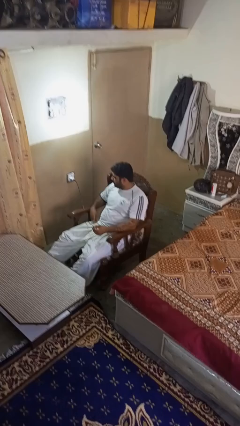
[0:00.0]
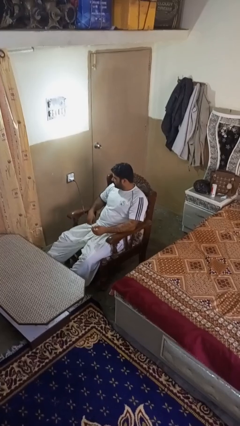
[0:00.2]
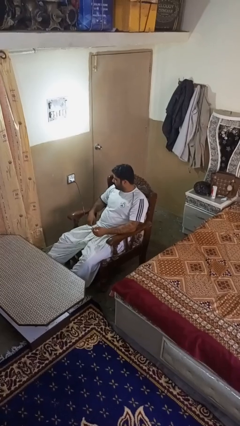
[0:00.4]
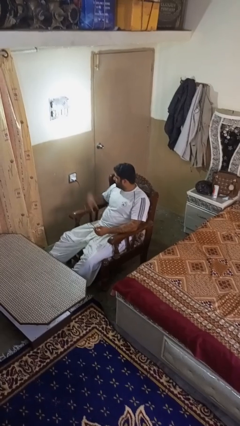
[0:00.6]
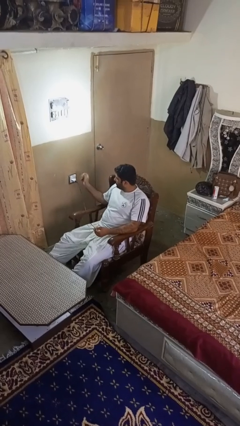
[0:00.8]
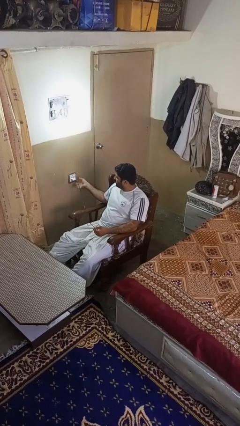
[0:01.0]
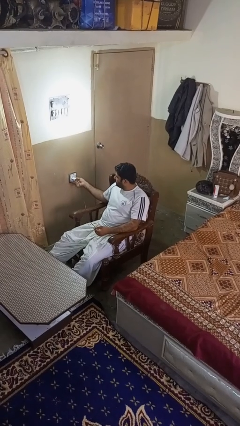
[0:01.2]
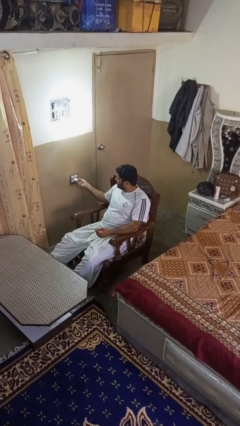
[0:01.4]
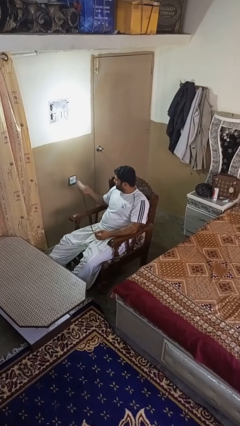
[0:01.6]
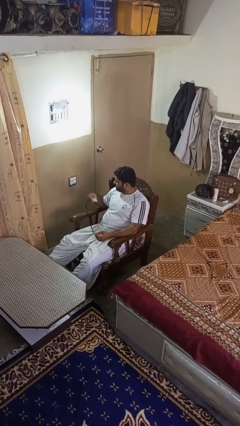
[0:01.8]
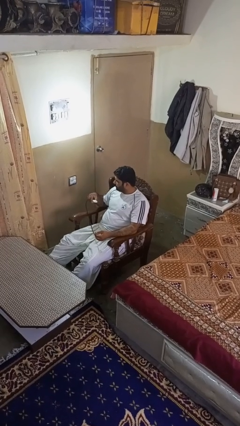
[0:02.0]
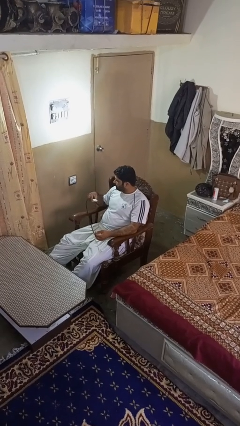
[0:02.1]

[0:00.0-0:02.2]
person unplugs from electrical socket

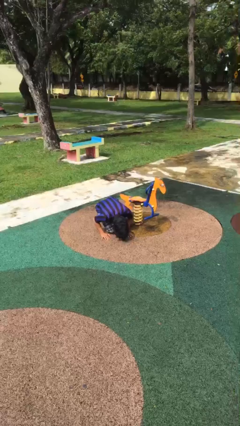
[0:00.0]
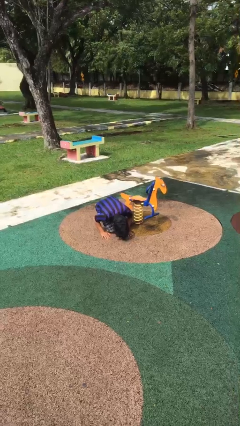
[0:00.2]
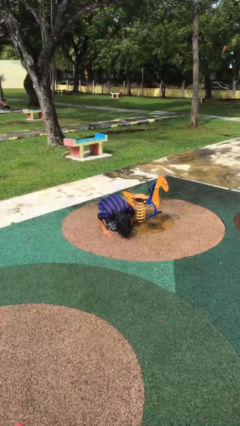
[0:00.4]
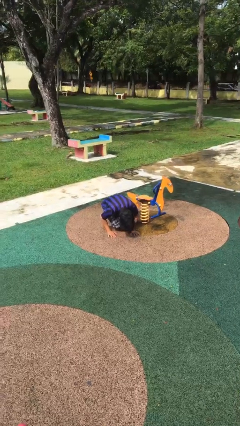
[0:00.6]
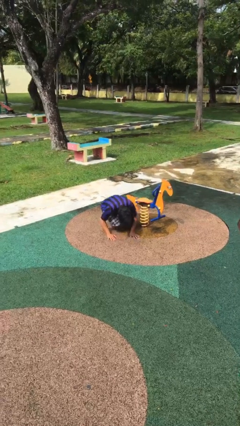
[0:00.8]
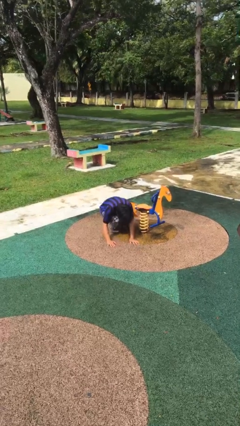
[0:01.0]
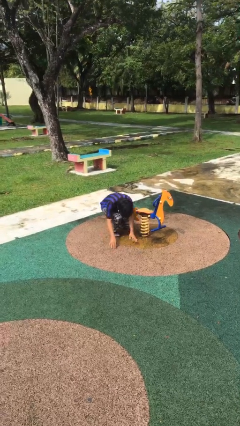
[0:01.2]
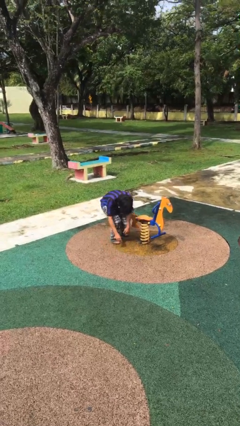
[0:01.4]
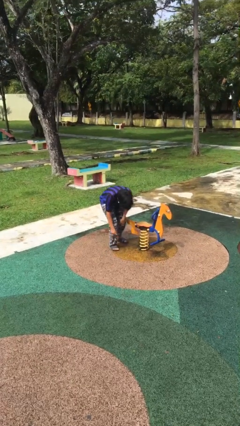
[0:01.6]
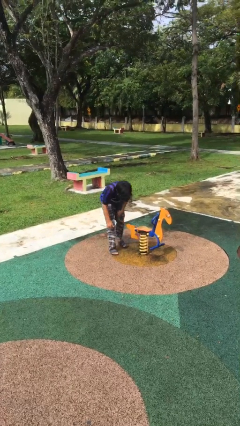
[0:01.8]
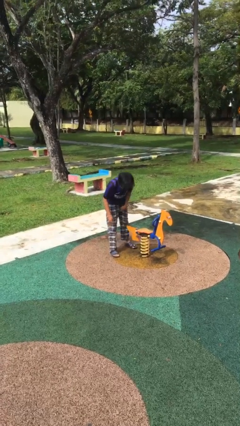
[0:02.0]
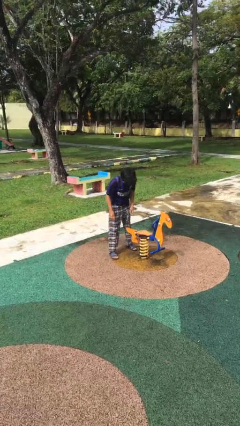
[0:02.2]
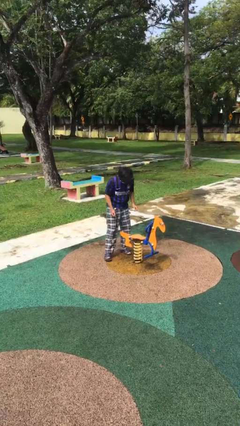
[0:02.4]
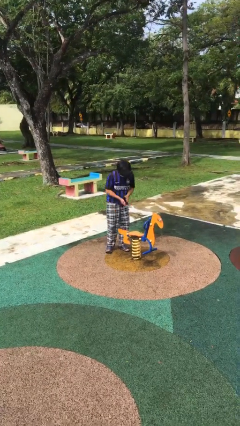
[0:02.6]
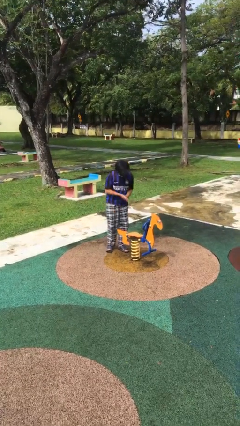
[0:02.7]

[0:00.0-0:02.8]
person stands up from floor

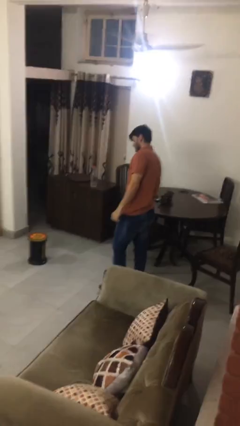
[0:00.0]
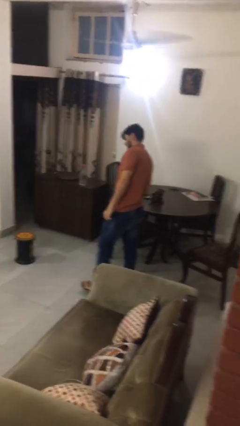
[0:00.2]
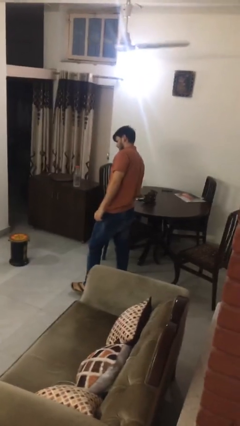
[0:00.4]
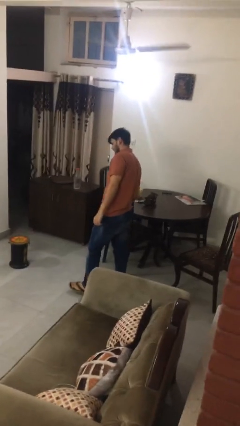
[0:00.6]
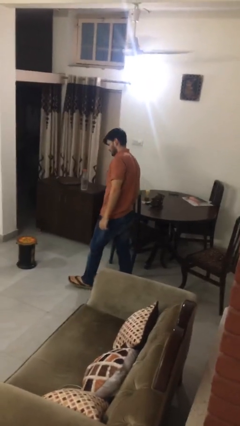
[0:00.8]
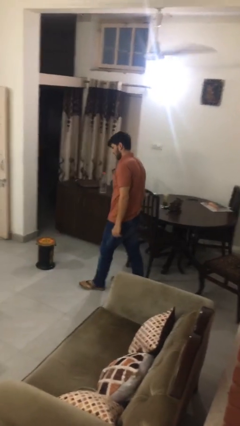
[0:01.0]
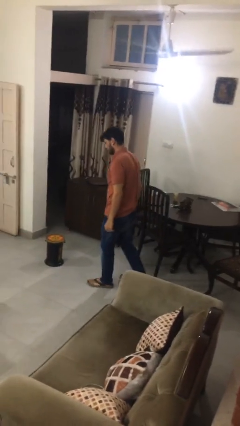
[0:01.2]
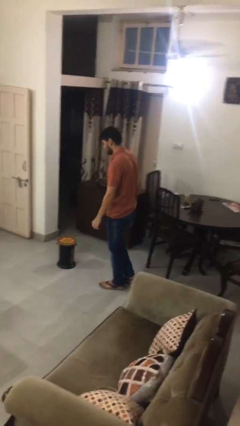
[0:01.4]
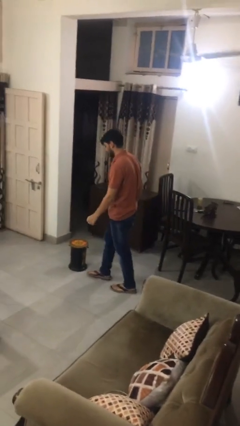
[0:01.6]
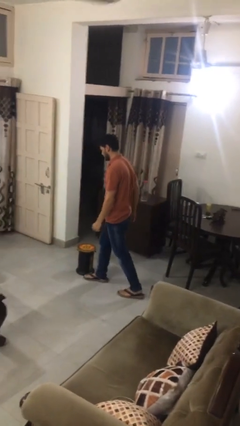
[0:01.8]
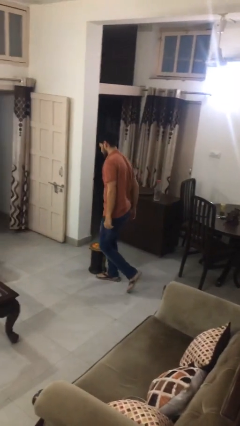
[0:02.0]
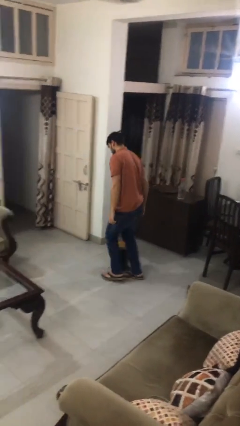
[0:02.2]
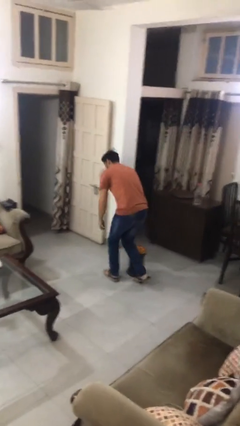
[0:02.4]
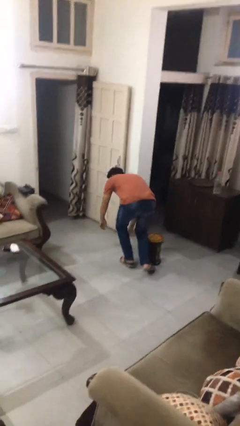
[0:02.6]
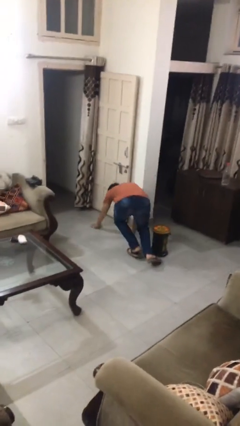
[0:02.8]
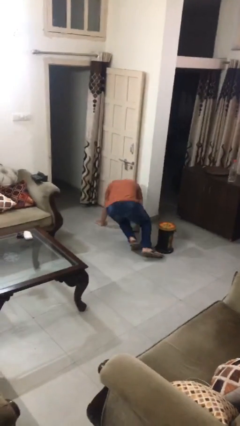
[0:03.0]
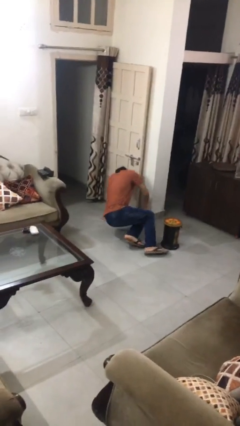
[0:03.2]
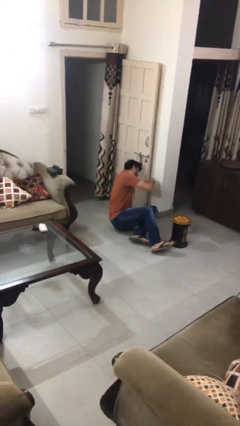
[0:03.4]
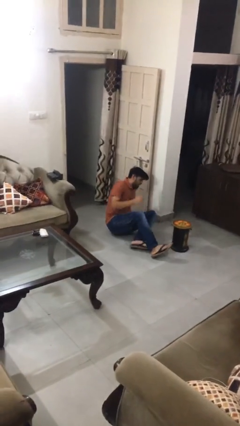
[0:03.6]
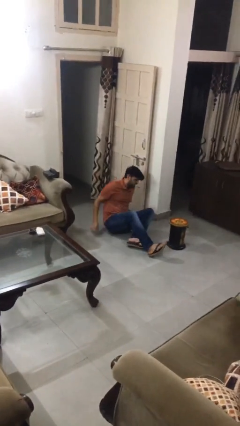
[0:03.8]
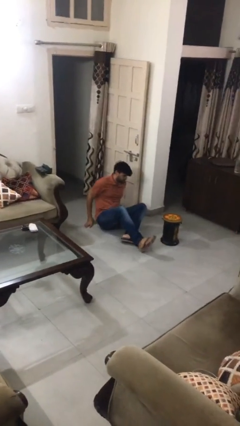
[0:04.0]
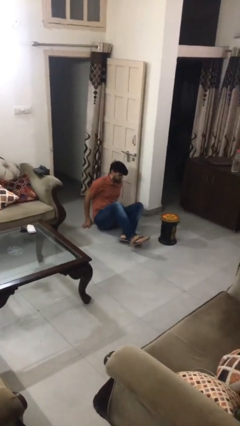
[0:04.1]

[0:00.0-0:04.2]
person trips on object on floor

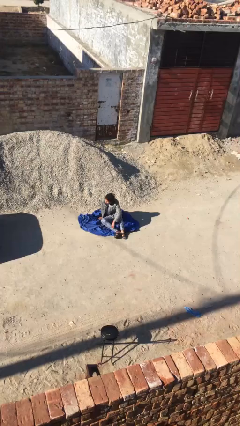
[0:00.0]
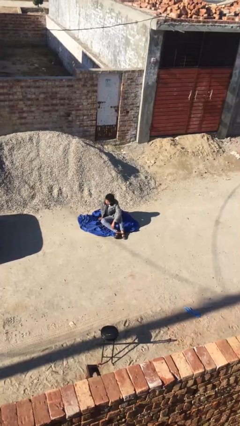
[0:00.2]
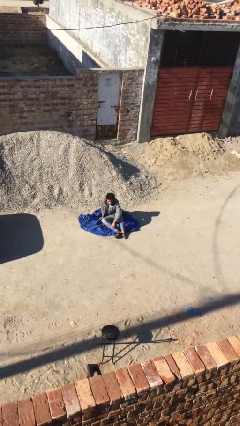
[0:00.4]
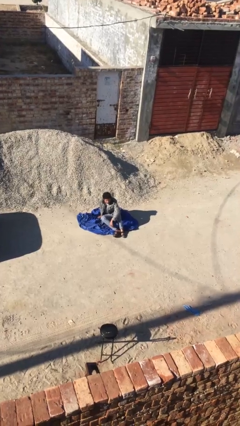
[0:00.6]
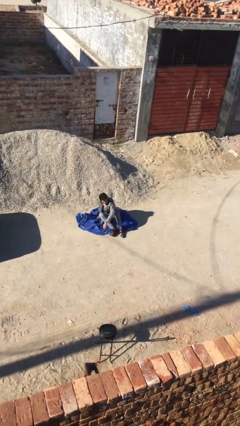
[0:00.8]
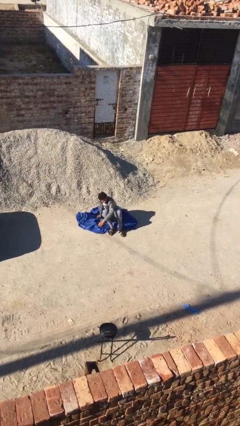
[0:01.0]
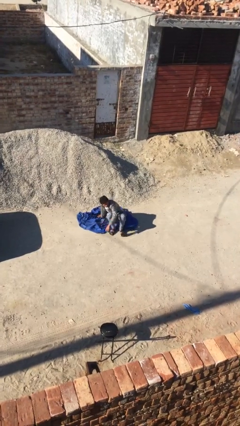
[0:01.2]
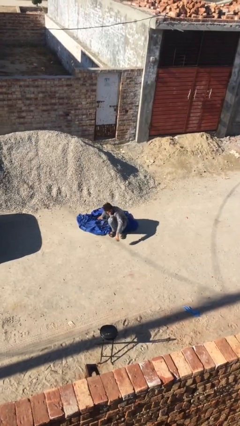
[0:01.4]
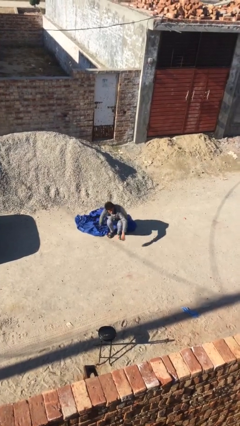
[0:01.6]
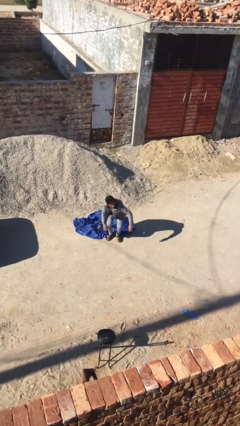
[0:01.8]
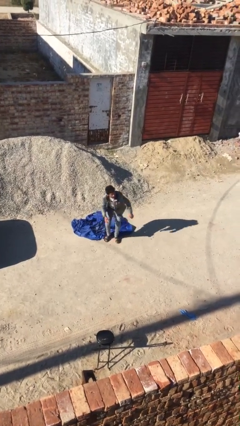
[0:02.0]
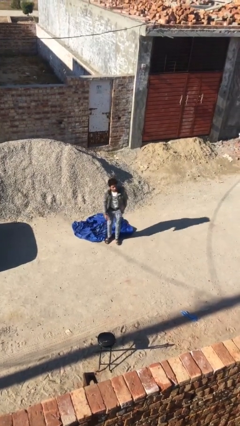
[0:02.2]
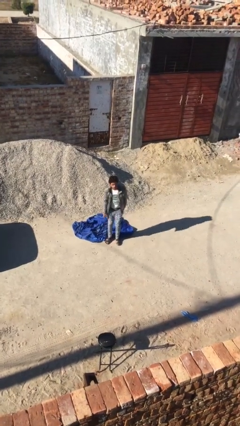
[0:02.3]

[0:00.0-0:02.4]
person stands up

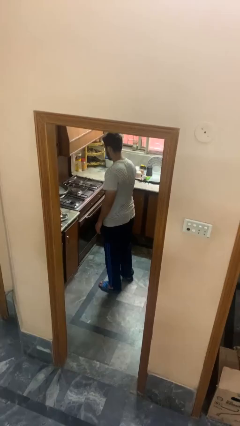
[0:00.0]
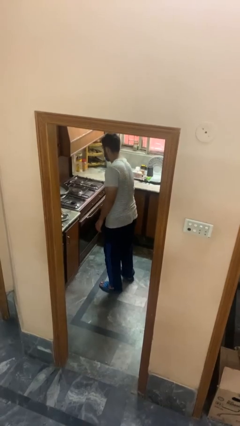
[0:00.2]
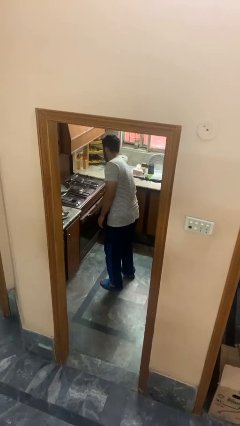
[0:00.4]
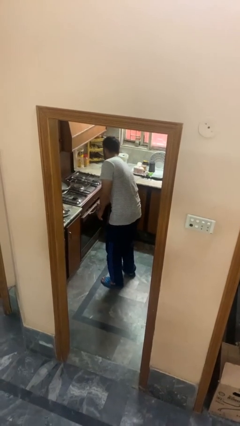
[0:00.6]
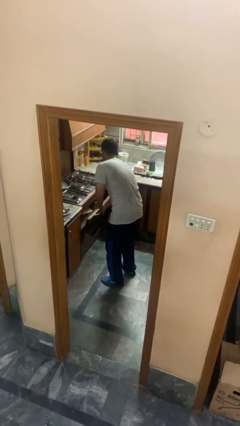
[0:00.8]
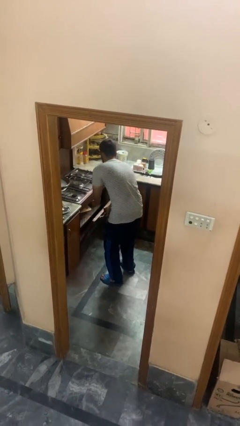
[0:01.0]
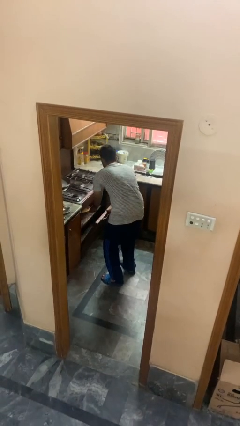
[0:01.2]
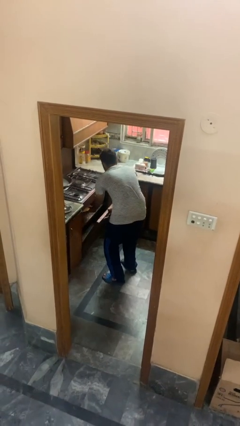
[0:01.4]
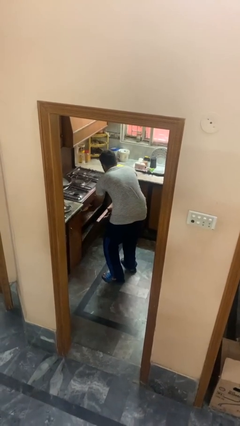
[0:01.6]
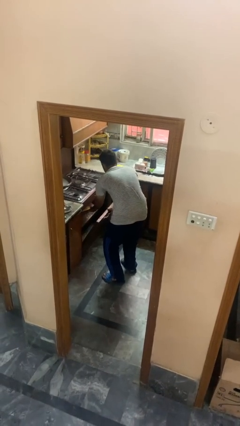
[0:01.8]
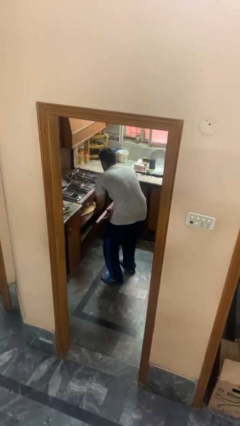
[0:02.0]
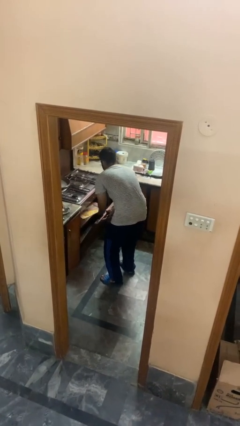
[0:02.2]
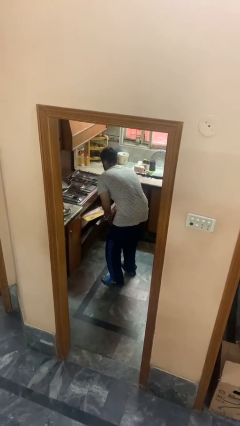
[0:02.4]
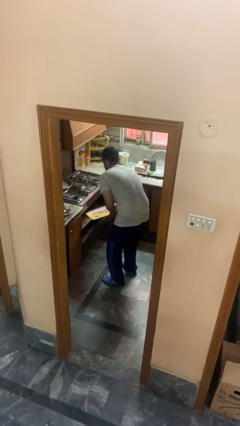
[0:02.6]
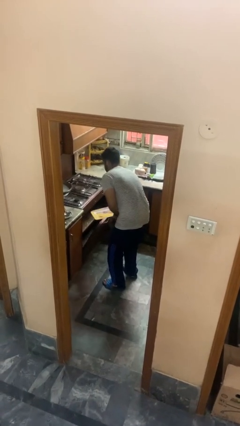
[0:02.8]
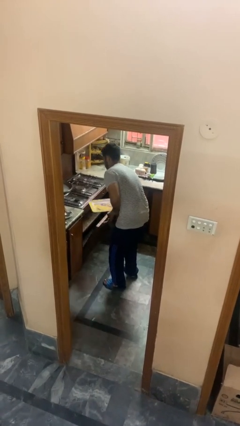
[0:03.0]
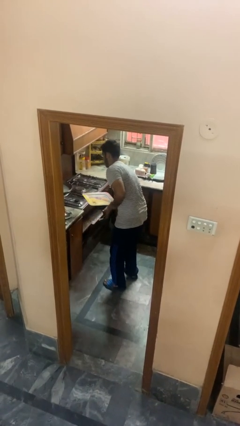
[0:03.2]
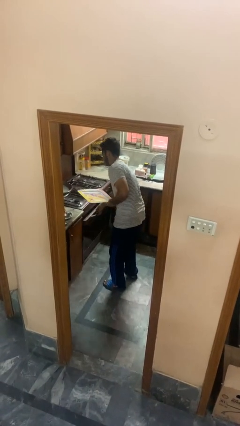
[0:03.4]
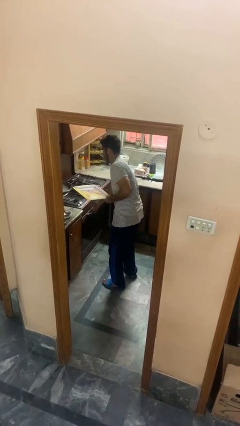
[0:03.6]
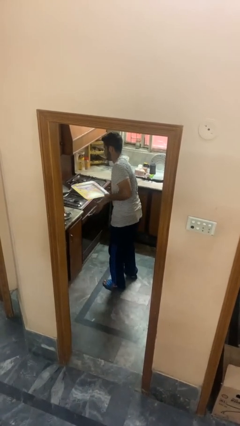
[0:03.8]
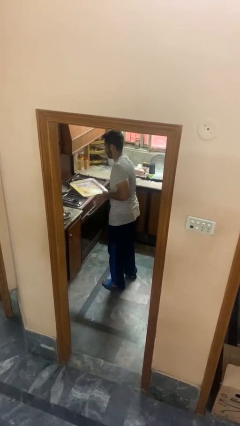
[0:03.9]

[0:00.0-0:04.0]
person takes object from oven

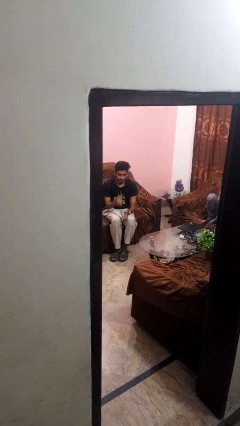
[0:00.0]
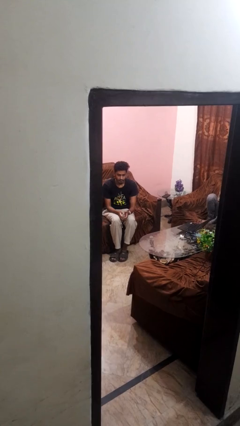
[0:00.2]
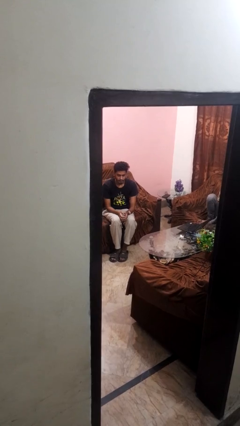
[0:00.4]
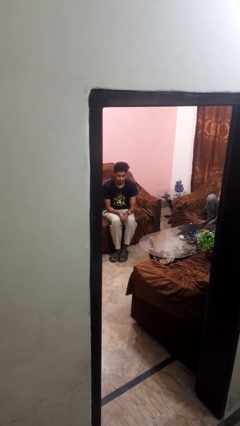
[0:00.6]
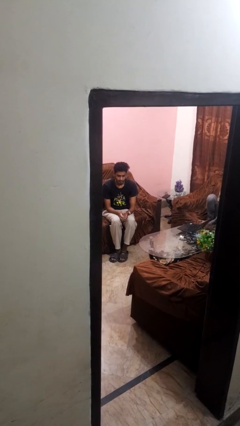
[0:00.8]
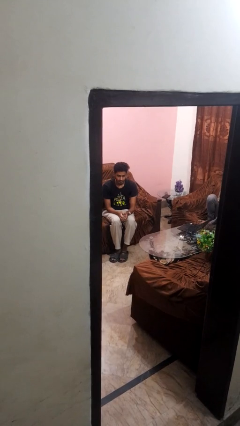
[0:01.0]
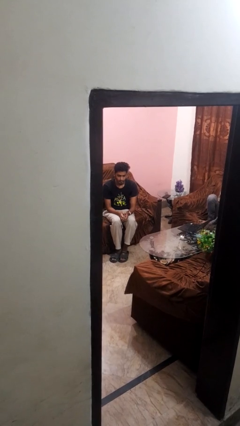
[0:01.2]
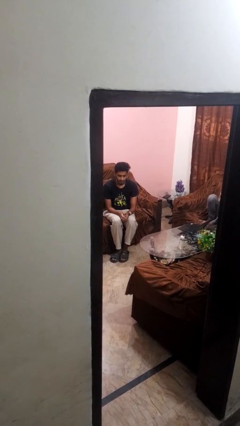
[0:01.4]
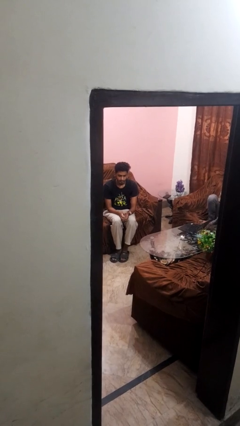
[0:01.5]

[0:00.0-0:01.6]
person gestures lower hand

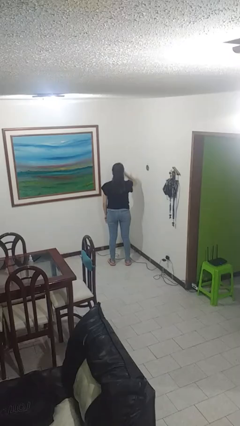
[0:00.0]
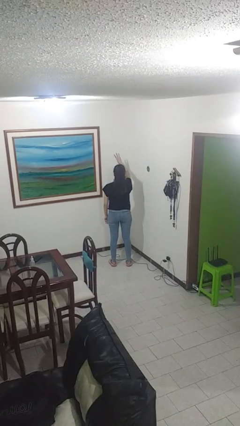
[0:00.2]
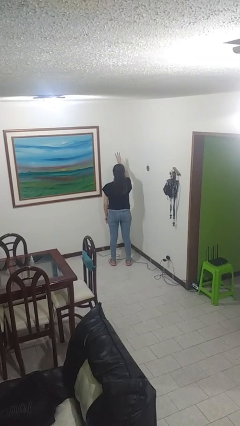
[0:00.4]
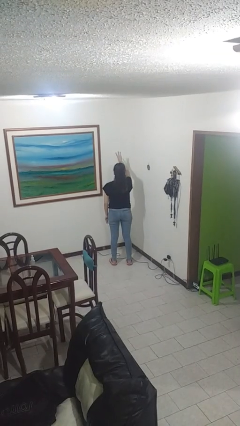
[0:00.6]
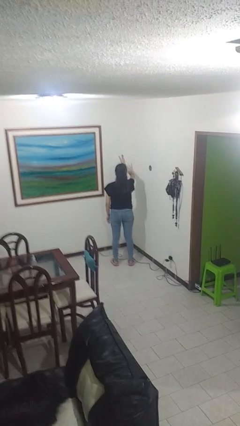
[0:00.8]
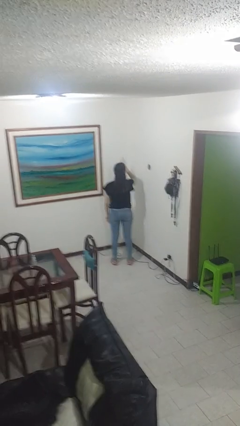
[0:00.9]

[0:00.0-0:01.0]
person gestures number three
